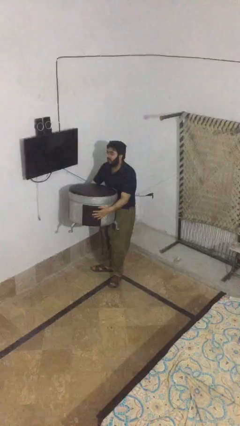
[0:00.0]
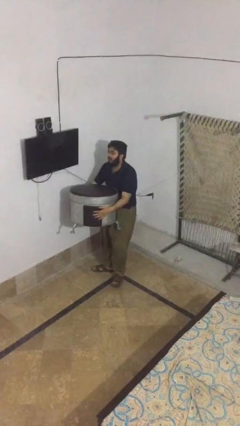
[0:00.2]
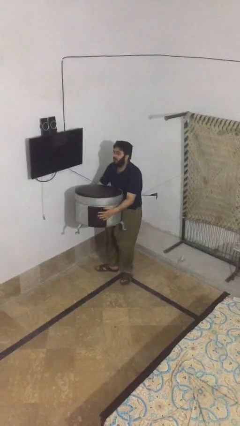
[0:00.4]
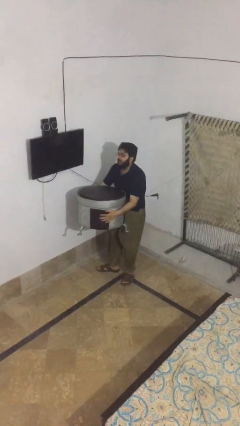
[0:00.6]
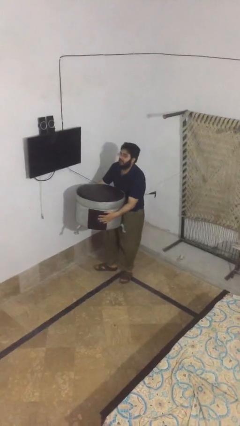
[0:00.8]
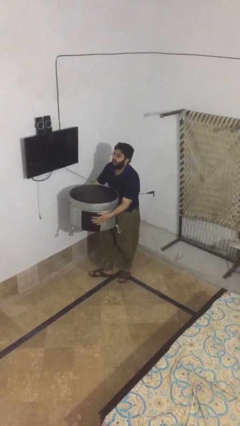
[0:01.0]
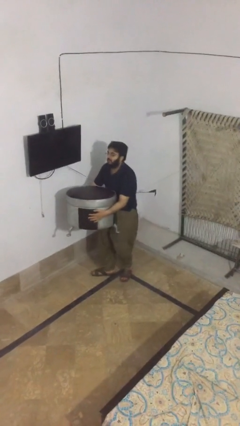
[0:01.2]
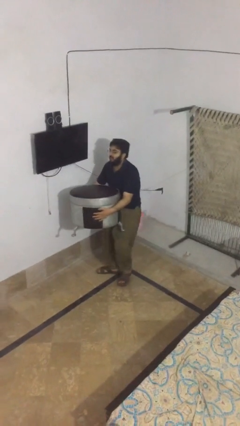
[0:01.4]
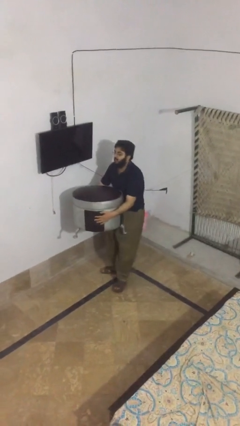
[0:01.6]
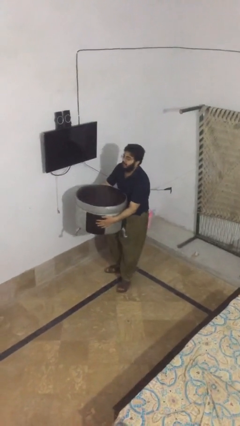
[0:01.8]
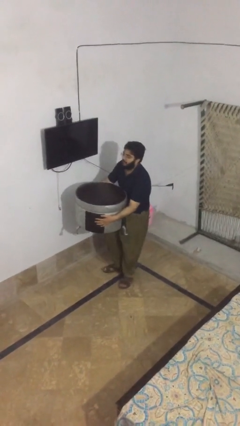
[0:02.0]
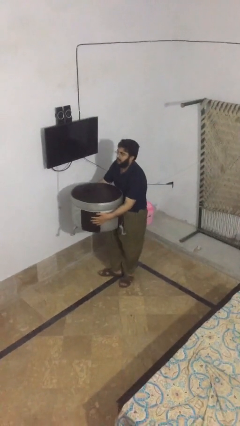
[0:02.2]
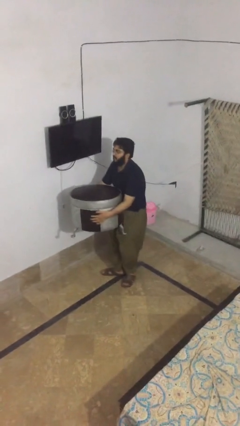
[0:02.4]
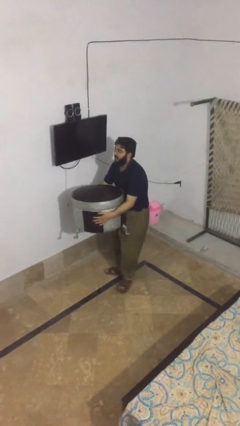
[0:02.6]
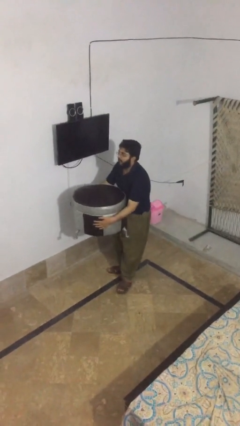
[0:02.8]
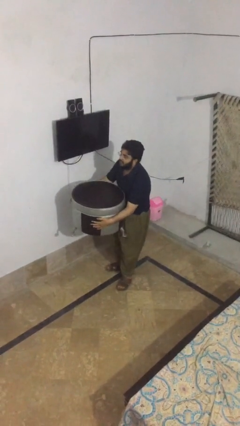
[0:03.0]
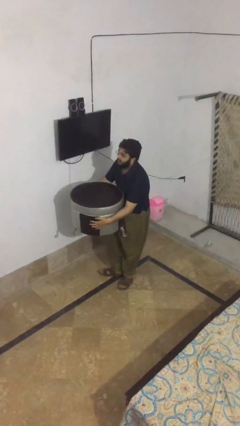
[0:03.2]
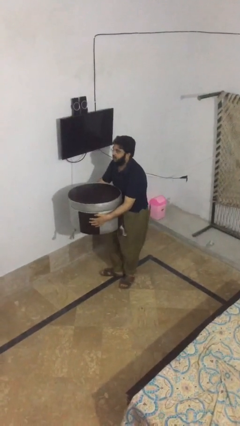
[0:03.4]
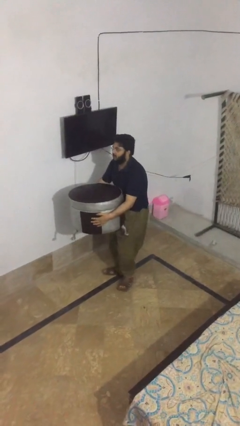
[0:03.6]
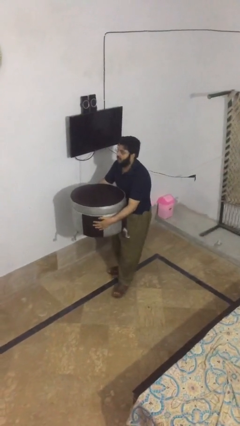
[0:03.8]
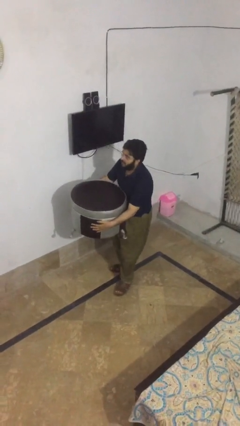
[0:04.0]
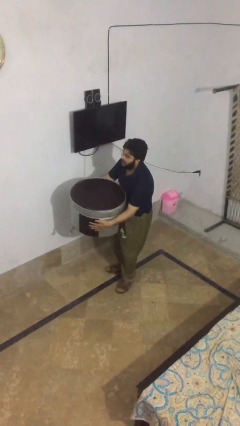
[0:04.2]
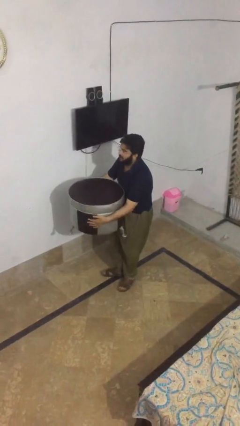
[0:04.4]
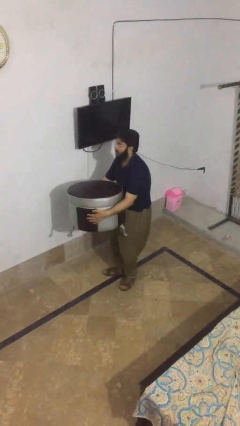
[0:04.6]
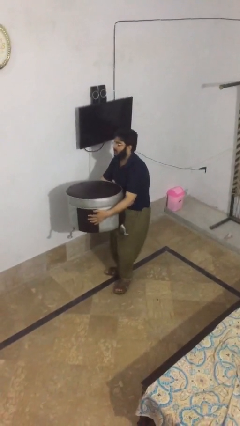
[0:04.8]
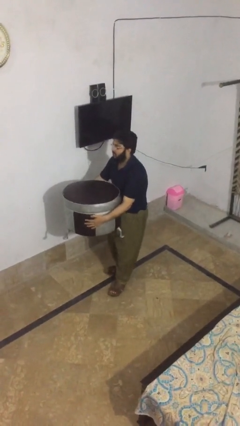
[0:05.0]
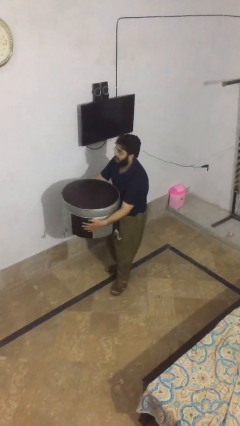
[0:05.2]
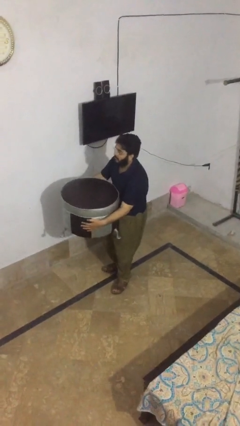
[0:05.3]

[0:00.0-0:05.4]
person carries heavy object

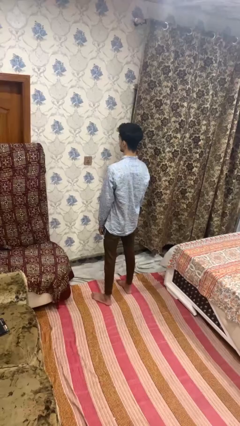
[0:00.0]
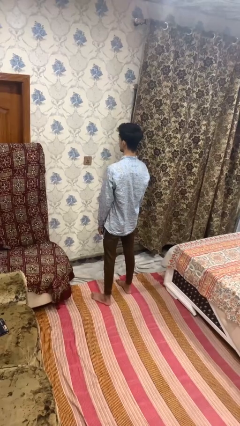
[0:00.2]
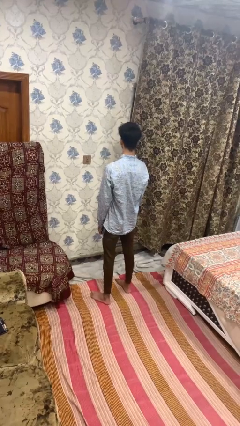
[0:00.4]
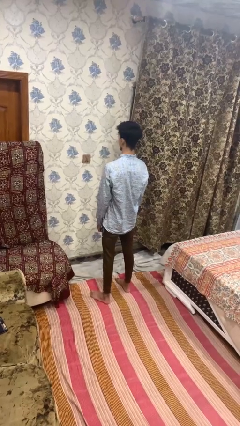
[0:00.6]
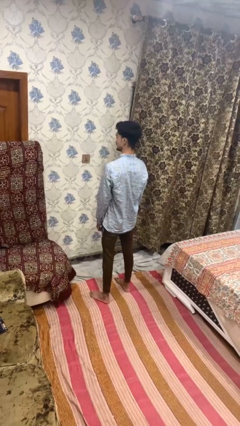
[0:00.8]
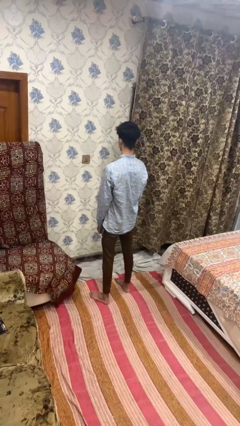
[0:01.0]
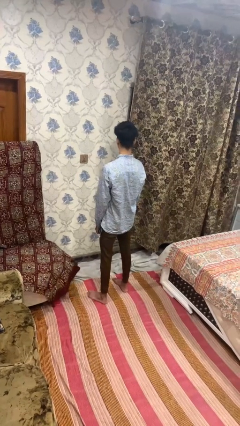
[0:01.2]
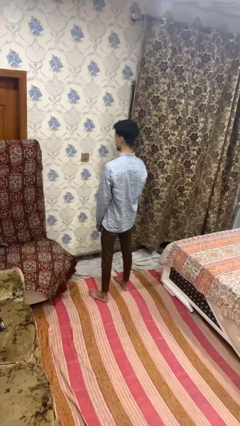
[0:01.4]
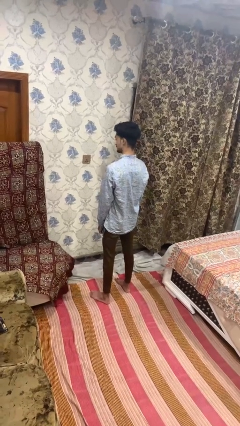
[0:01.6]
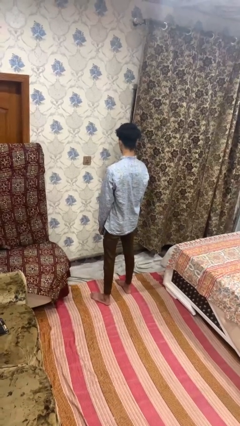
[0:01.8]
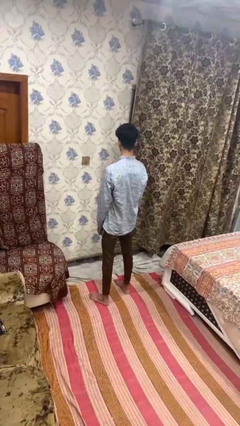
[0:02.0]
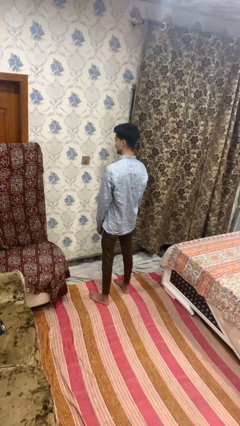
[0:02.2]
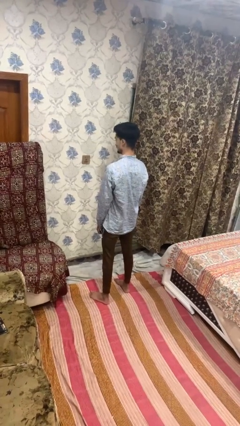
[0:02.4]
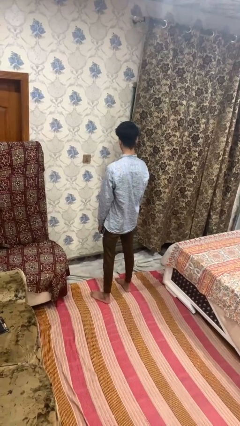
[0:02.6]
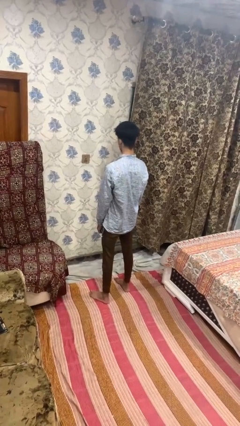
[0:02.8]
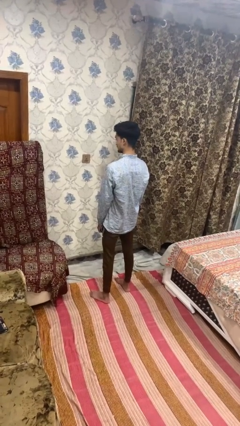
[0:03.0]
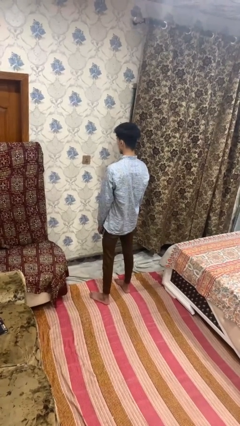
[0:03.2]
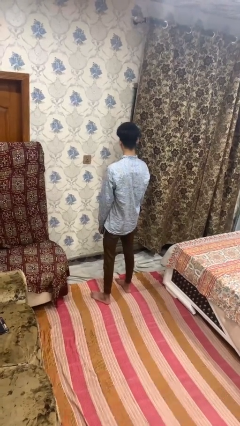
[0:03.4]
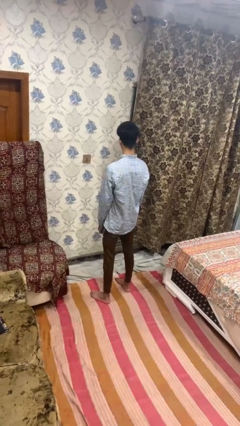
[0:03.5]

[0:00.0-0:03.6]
person shakes head

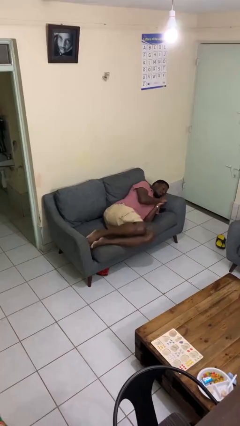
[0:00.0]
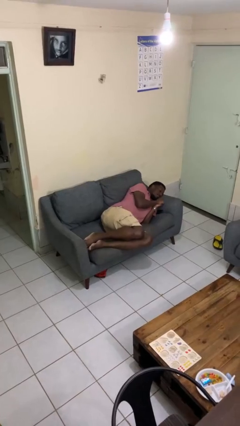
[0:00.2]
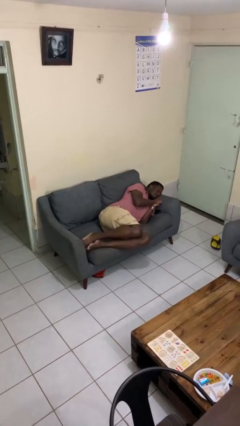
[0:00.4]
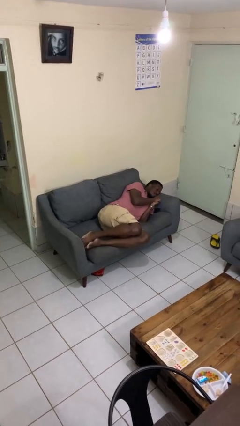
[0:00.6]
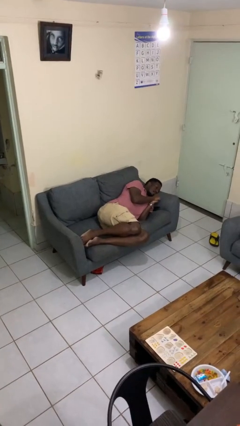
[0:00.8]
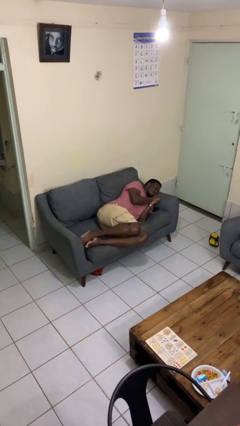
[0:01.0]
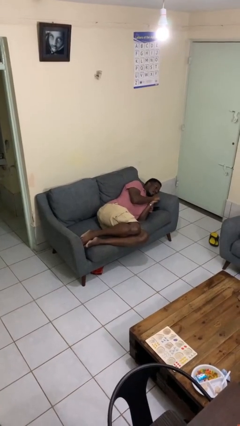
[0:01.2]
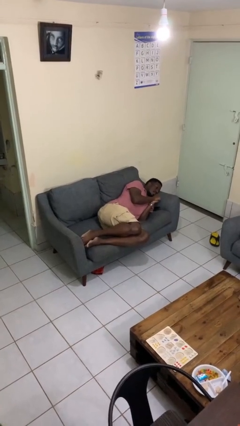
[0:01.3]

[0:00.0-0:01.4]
person lies down on couch

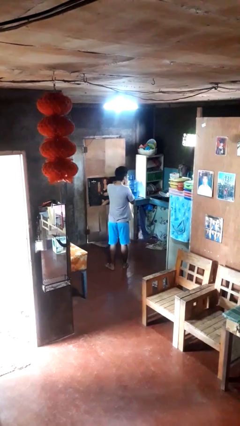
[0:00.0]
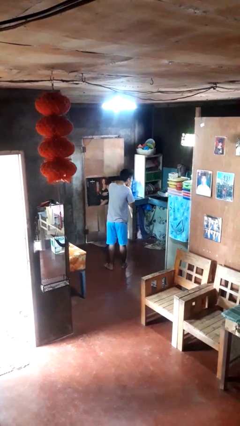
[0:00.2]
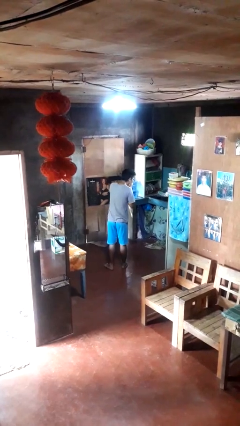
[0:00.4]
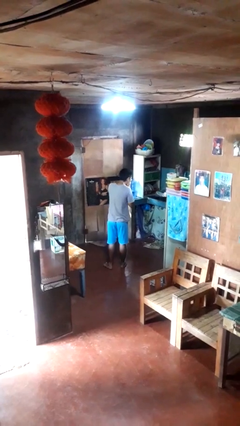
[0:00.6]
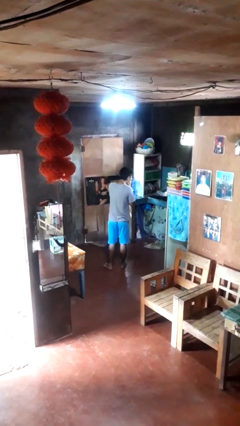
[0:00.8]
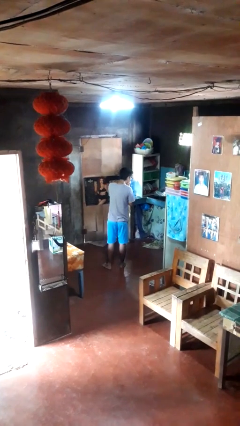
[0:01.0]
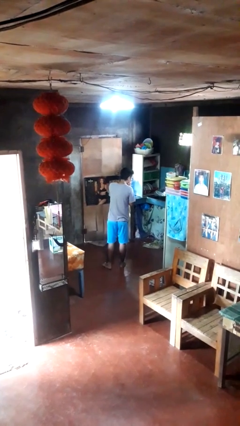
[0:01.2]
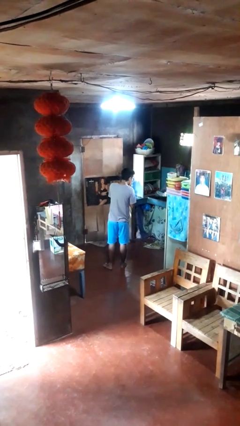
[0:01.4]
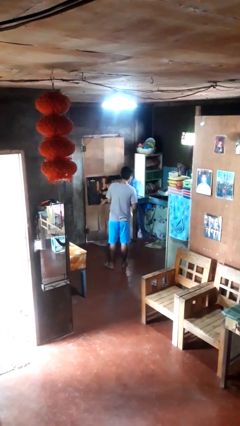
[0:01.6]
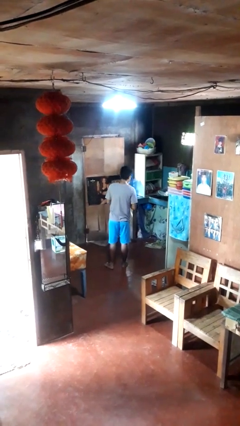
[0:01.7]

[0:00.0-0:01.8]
person sneezes into hand

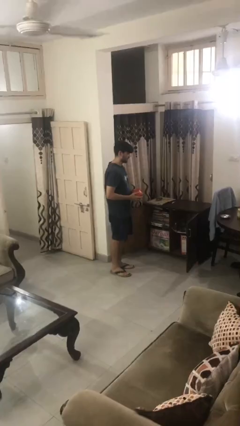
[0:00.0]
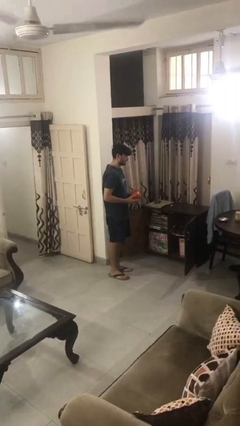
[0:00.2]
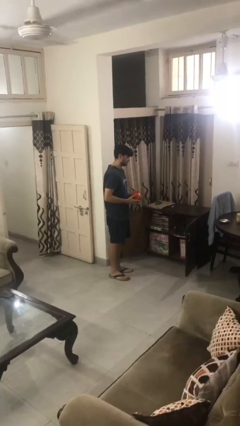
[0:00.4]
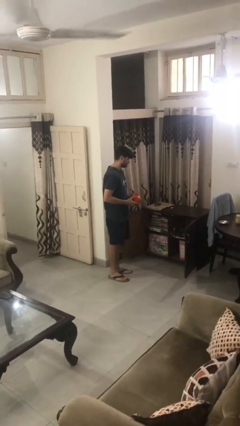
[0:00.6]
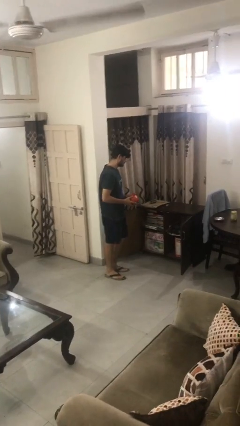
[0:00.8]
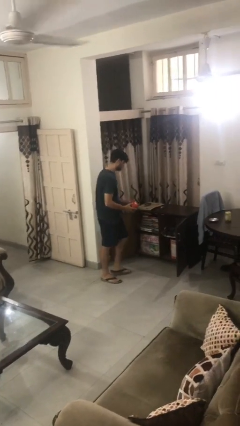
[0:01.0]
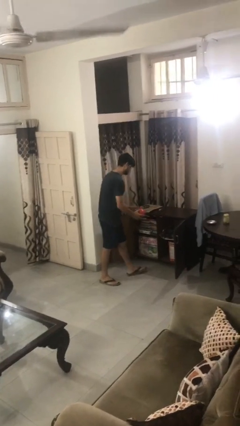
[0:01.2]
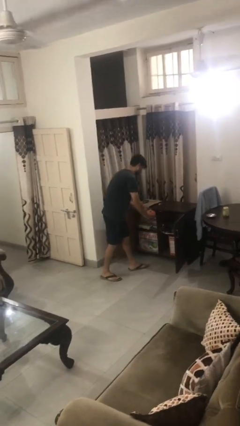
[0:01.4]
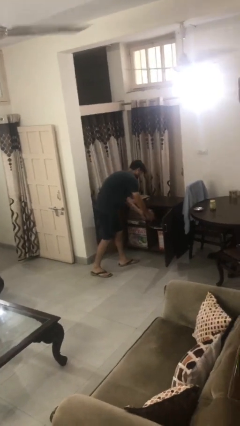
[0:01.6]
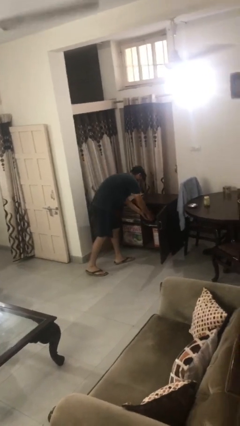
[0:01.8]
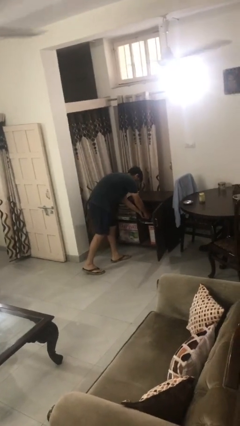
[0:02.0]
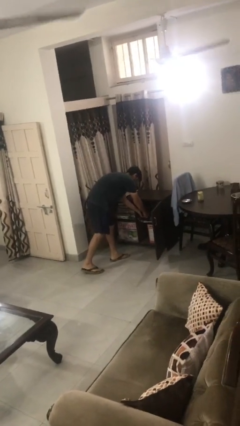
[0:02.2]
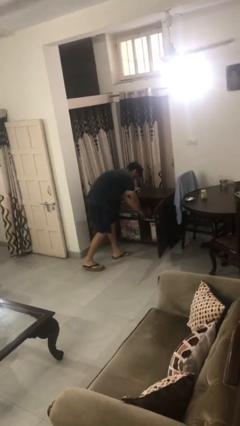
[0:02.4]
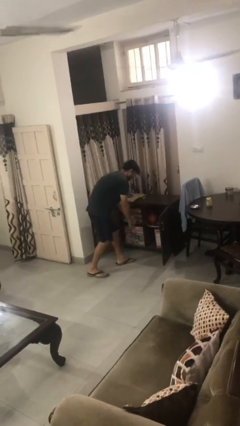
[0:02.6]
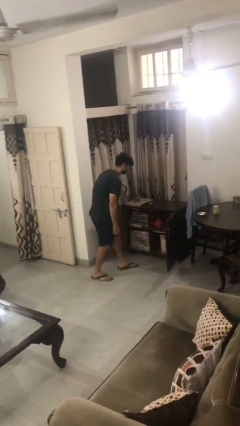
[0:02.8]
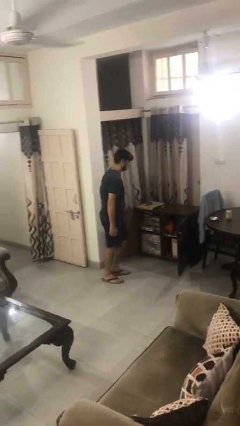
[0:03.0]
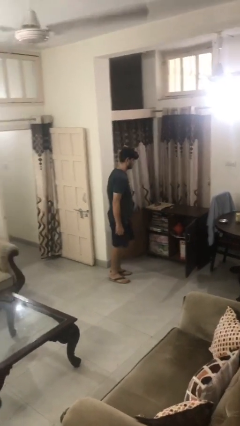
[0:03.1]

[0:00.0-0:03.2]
person puts down object into cabinet

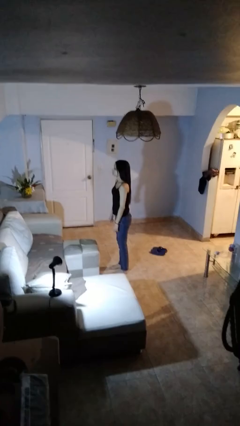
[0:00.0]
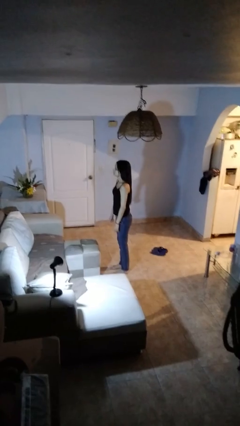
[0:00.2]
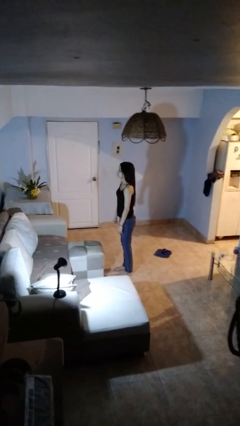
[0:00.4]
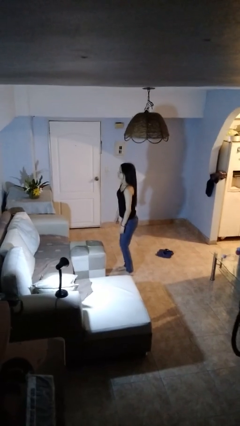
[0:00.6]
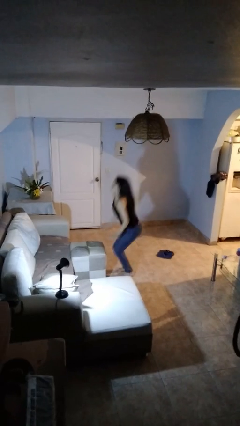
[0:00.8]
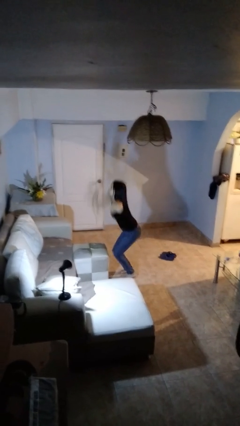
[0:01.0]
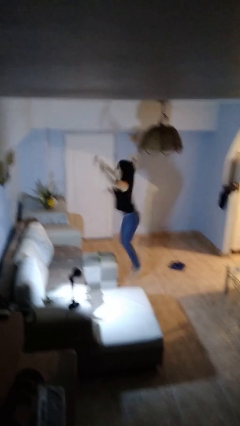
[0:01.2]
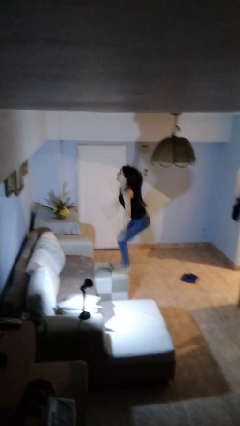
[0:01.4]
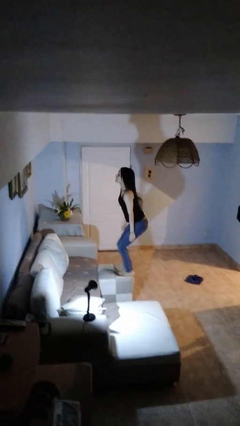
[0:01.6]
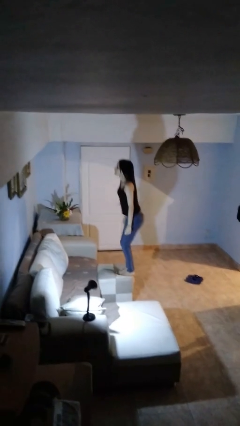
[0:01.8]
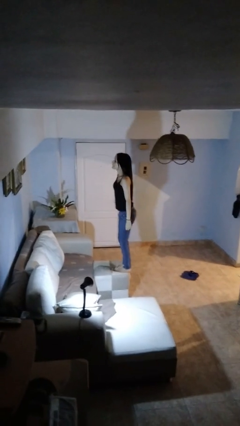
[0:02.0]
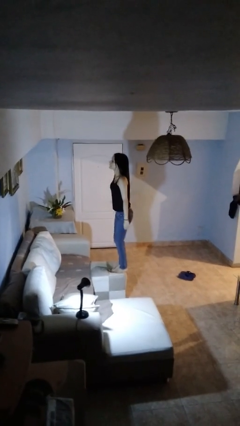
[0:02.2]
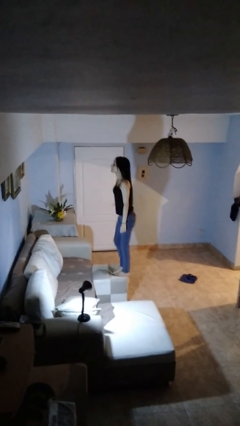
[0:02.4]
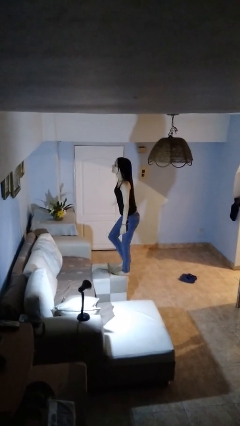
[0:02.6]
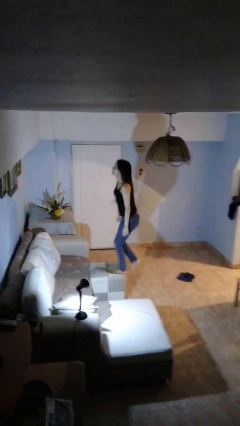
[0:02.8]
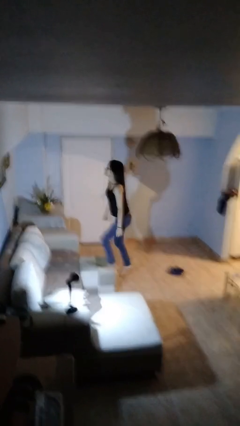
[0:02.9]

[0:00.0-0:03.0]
person jumps on couch
